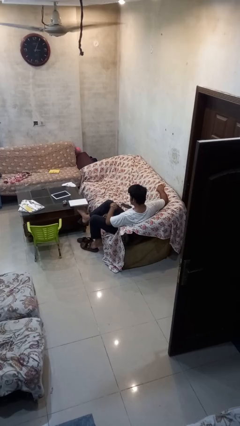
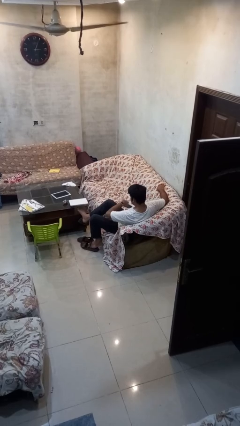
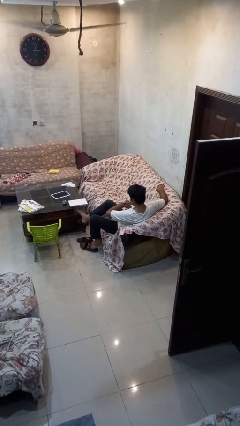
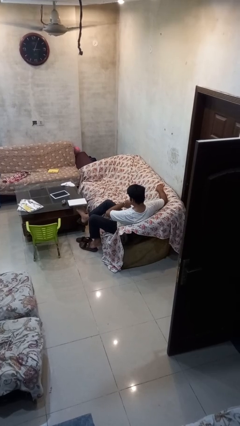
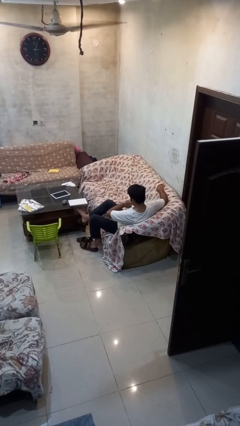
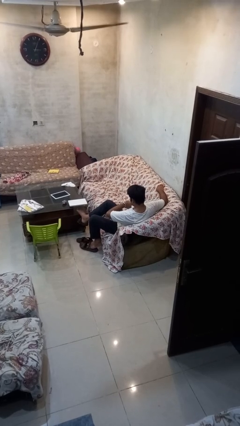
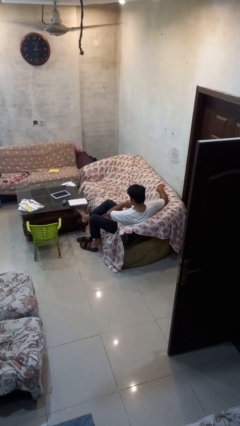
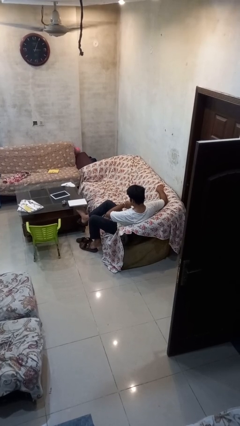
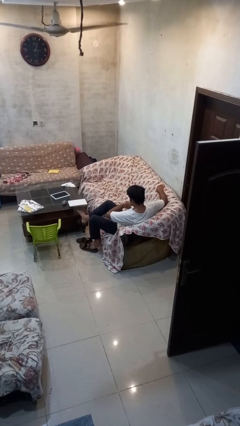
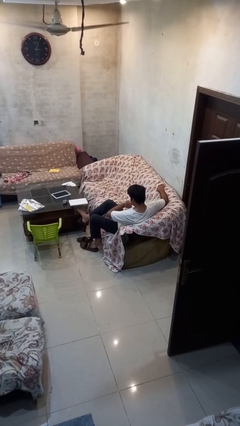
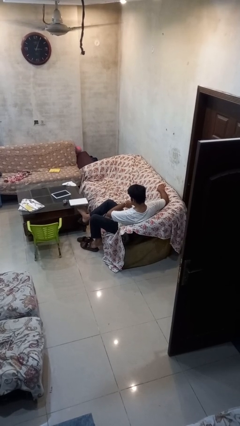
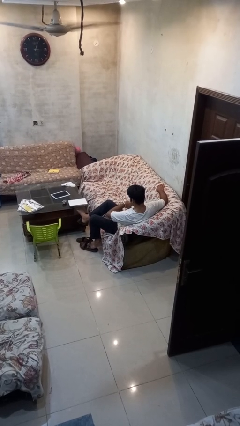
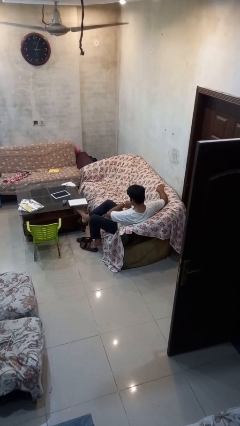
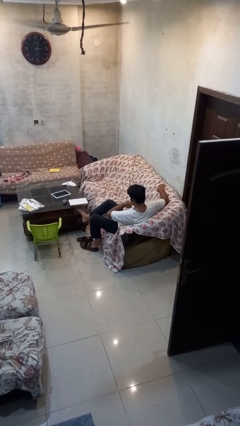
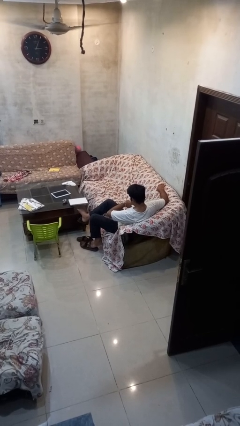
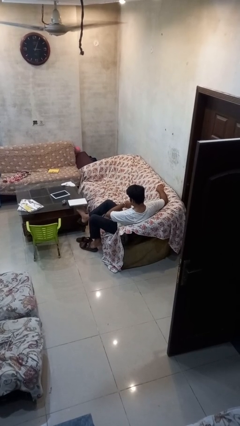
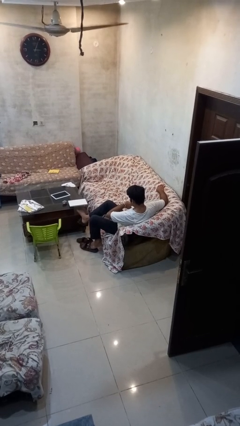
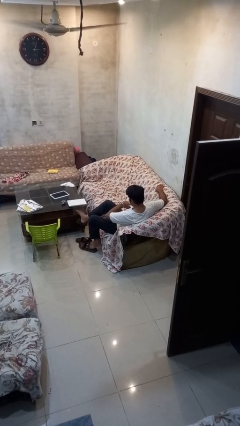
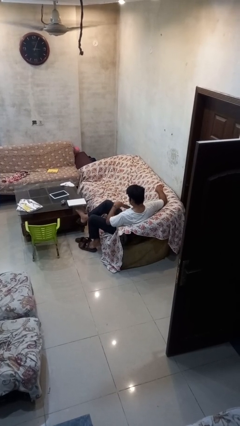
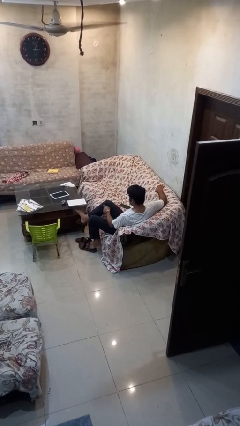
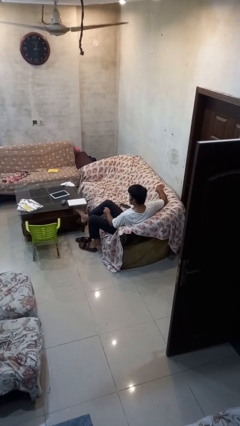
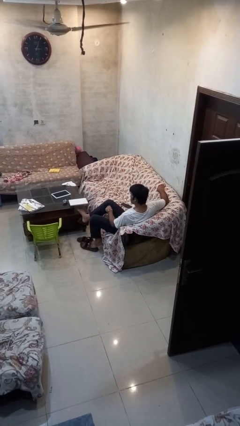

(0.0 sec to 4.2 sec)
person looks at wristwatch

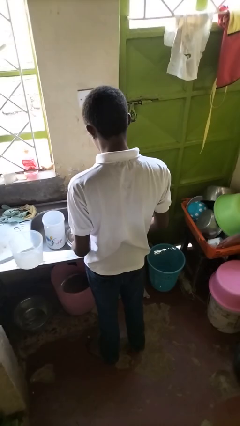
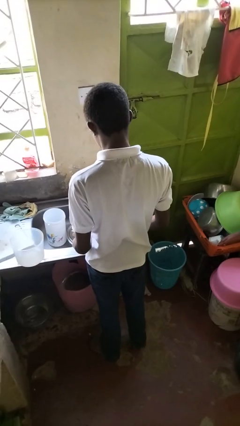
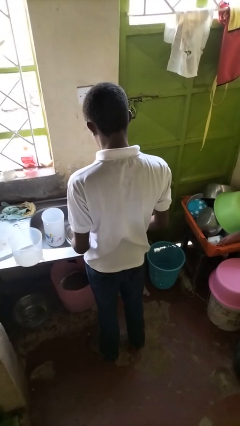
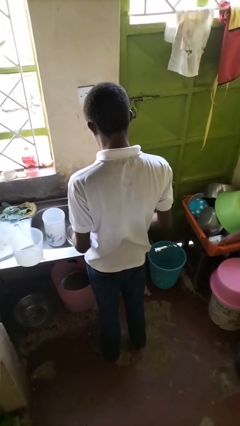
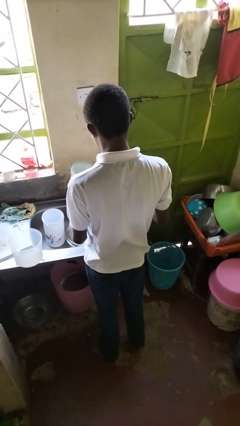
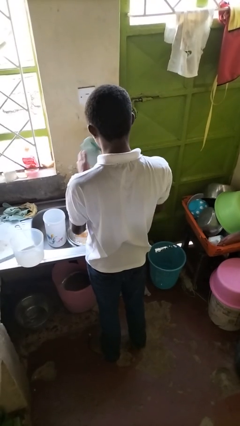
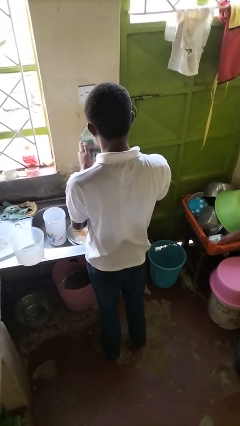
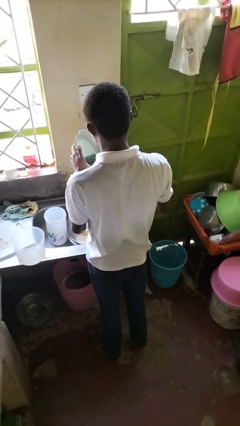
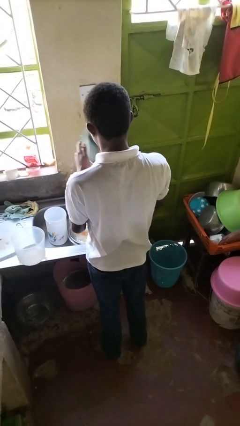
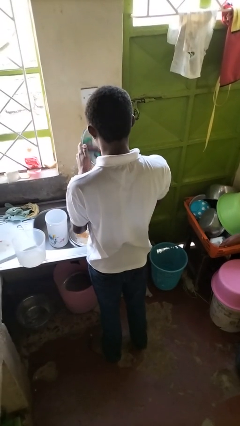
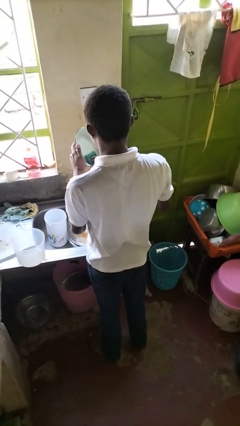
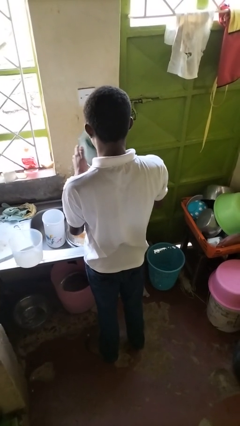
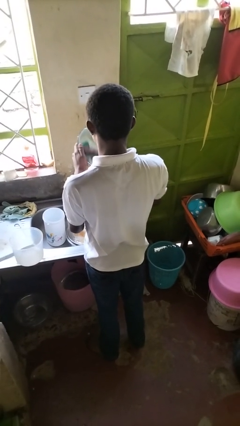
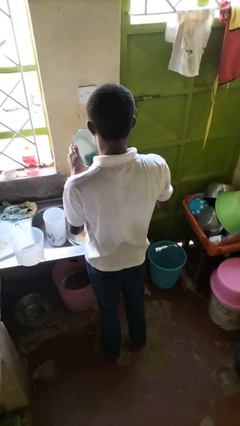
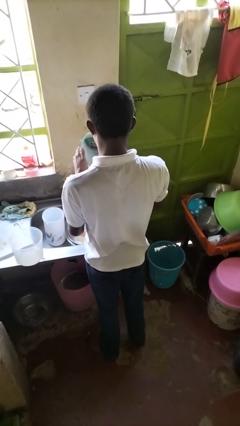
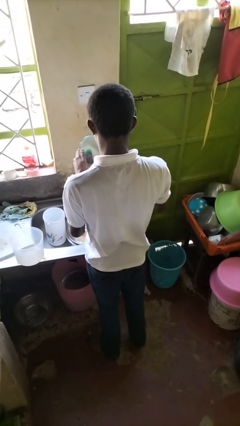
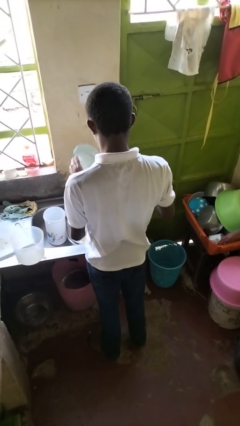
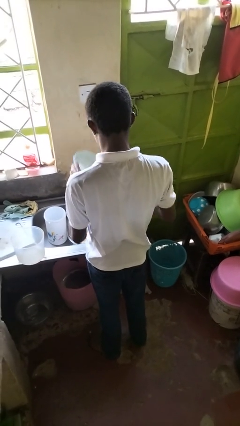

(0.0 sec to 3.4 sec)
person washes dish

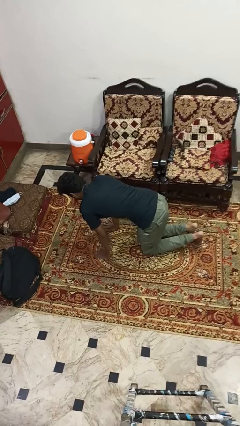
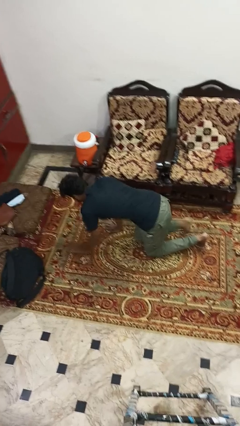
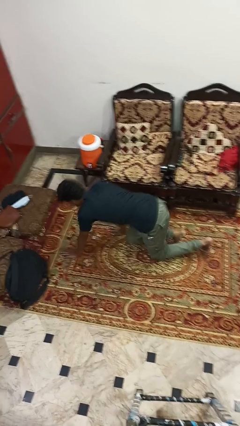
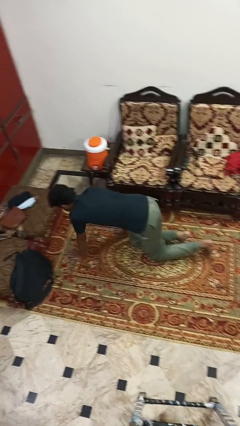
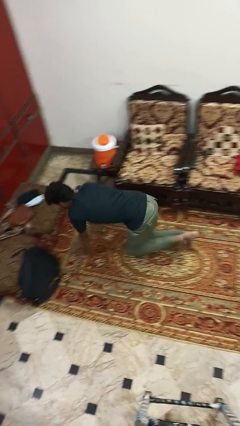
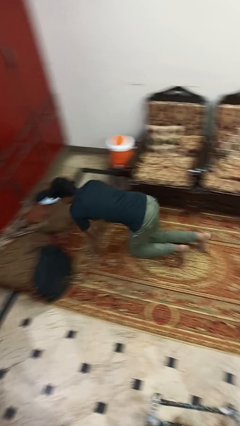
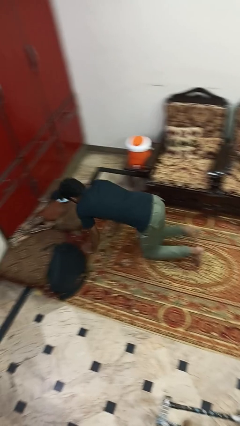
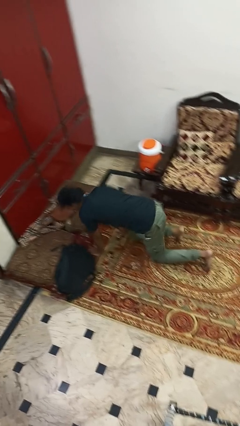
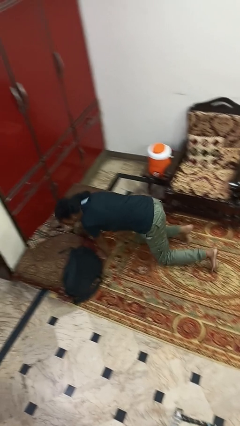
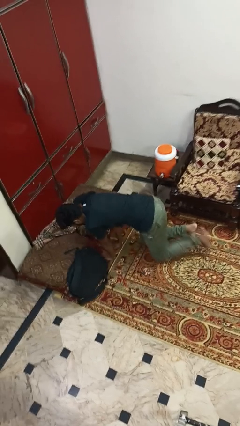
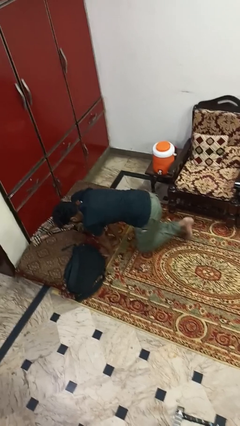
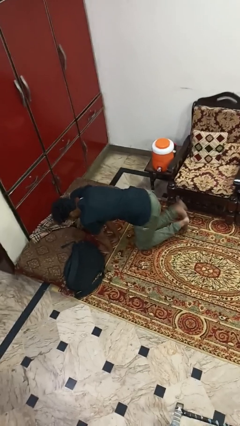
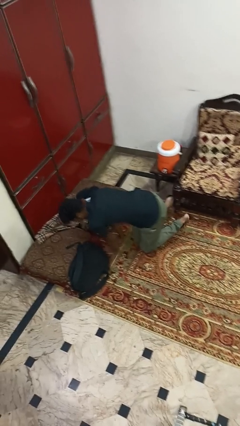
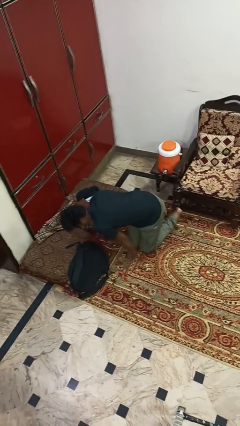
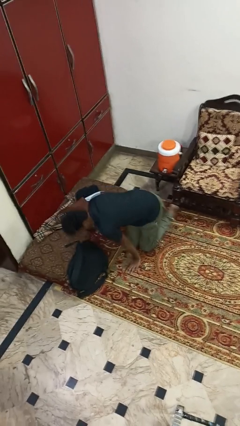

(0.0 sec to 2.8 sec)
person crawls

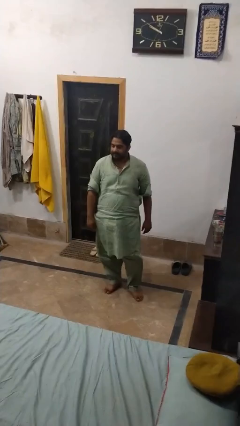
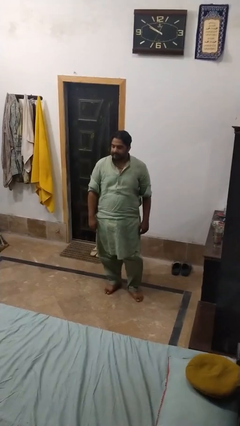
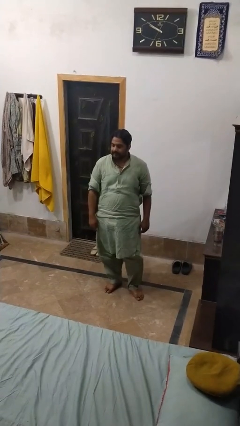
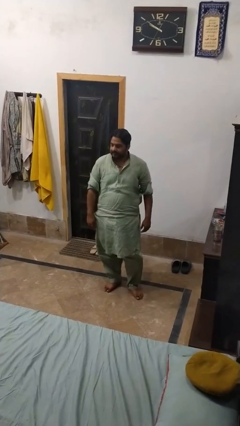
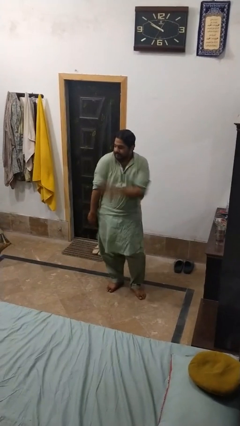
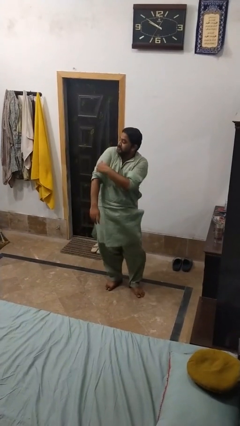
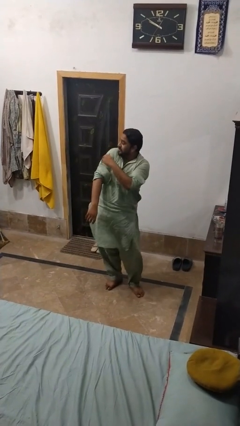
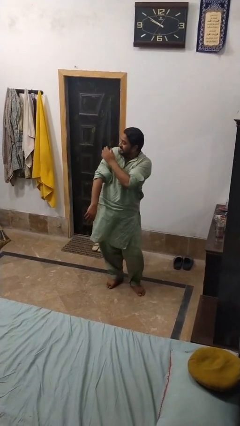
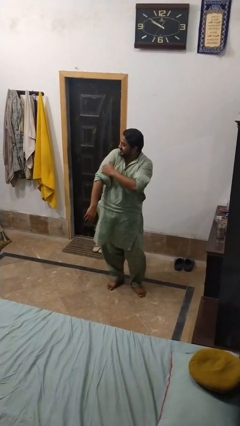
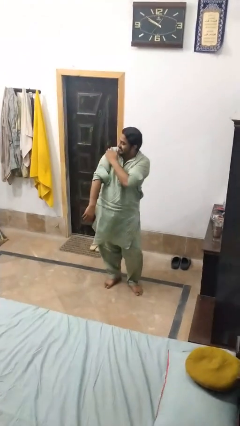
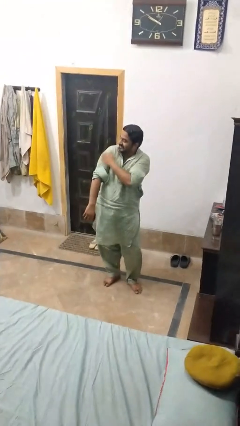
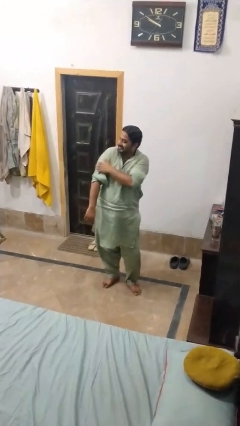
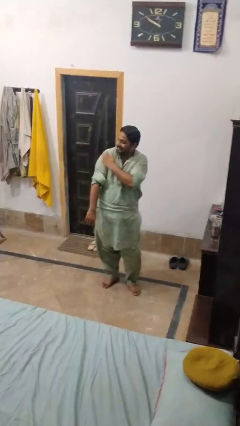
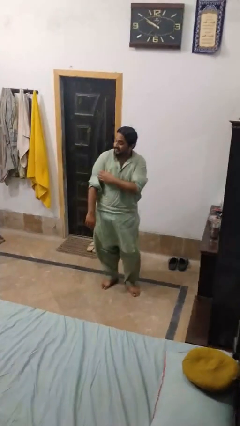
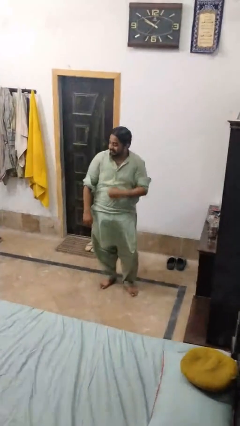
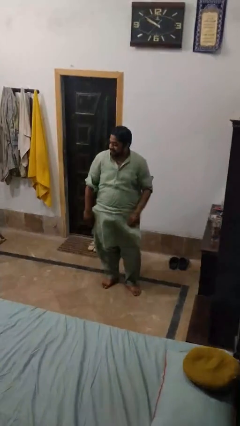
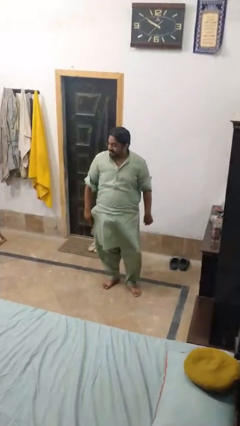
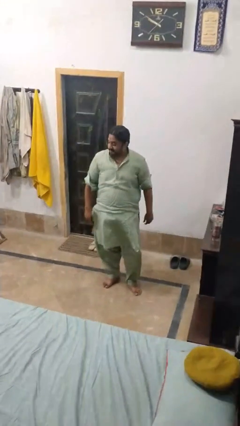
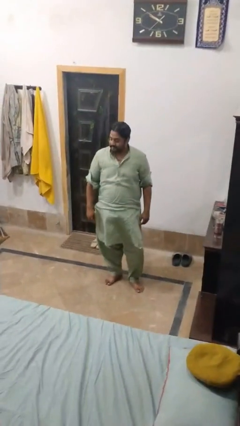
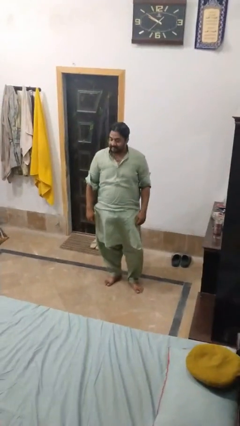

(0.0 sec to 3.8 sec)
person swats bug

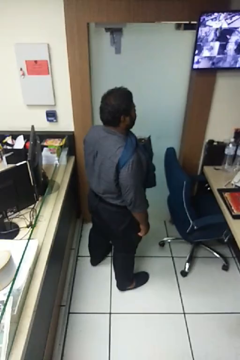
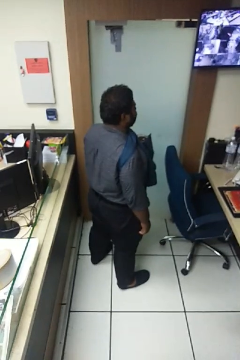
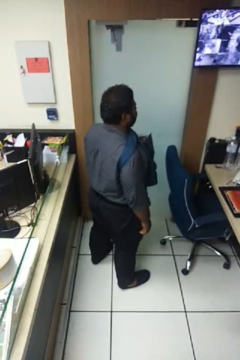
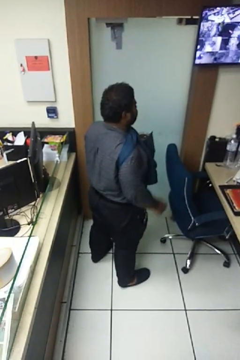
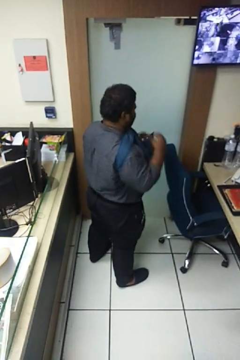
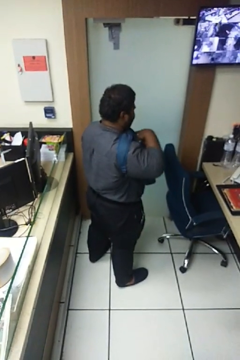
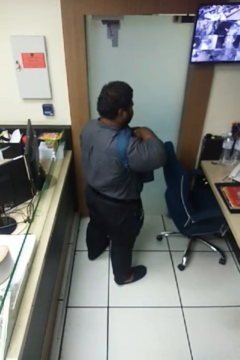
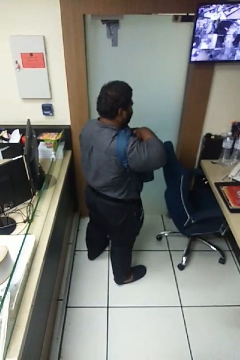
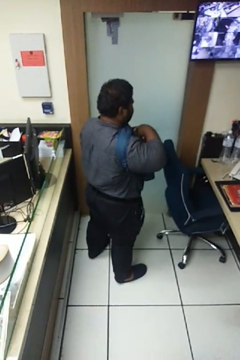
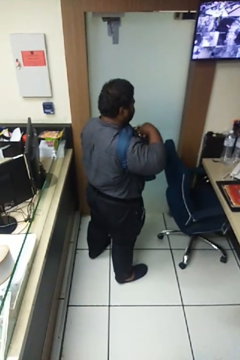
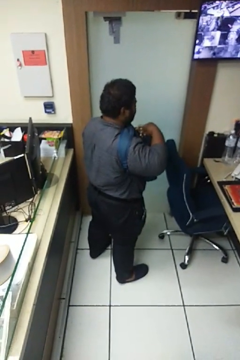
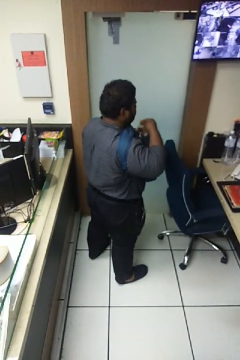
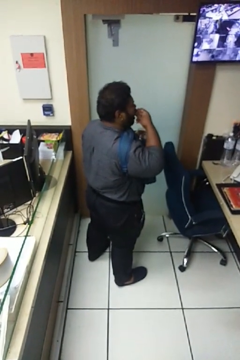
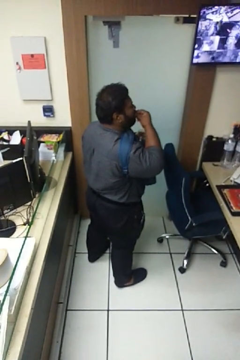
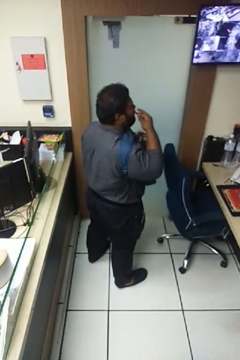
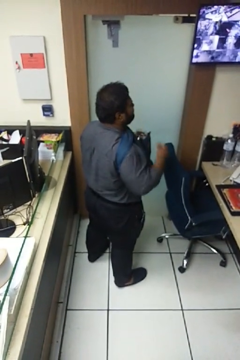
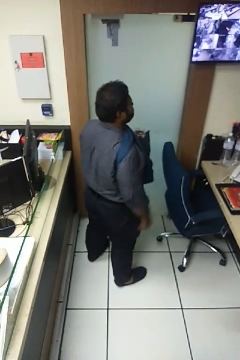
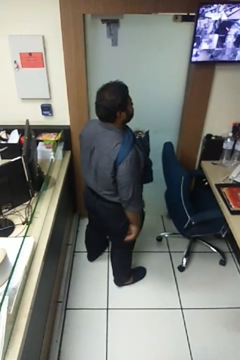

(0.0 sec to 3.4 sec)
person eats snack from bag

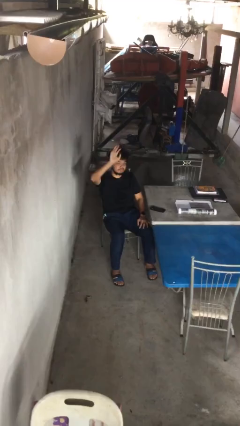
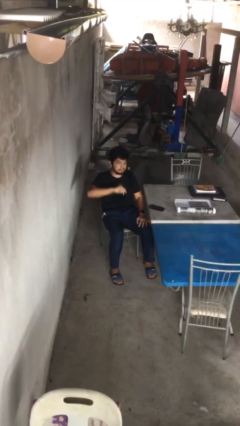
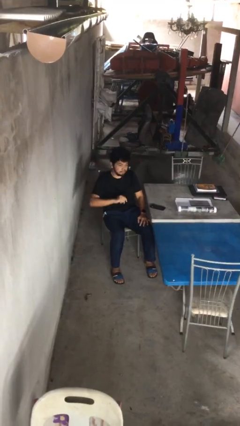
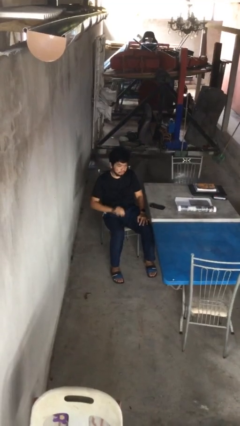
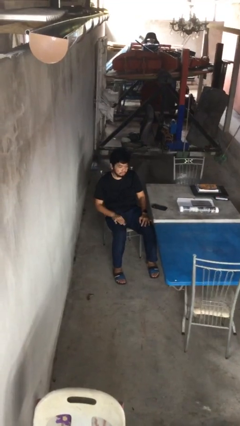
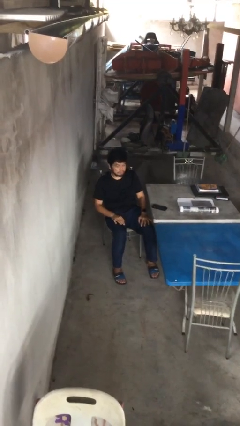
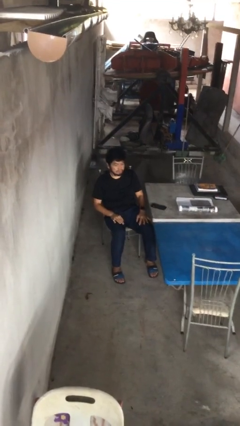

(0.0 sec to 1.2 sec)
person gestures swipe down
